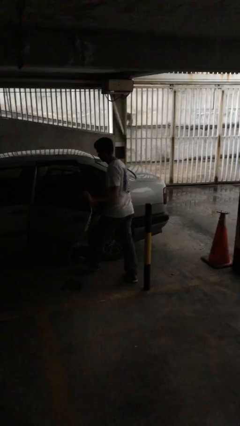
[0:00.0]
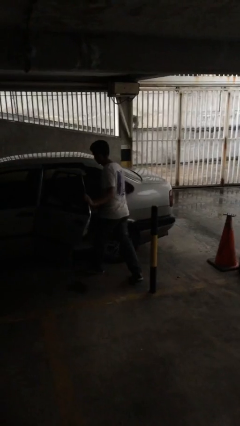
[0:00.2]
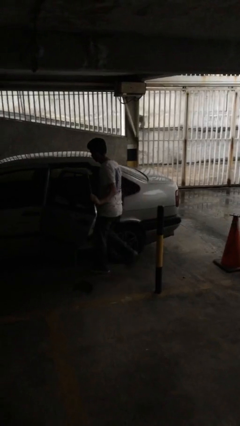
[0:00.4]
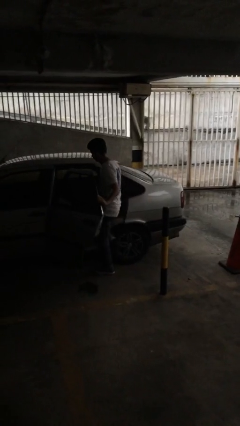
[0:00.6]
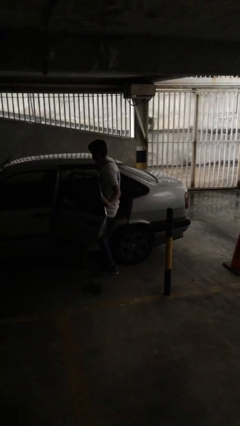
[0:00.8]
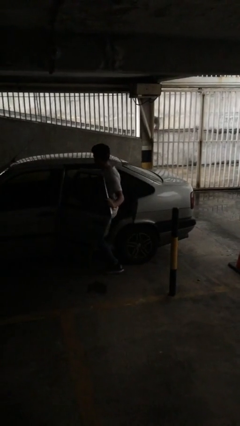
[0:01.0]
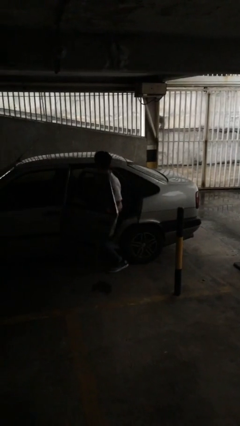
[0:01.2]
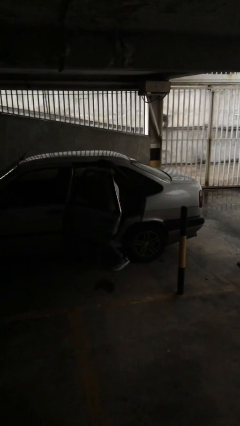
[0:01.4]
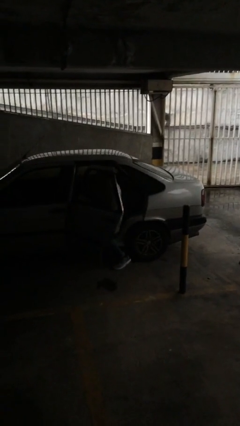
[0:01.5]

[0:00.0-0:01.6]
person enters car

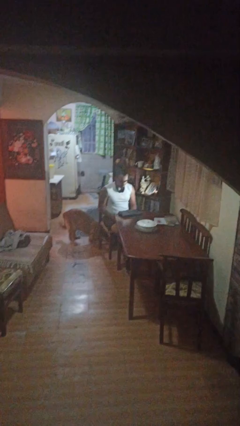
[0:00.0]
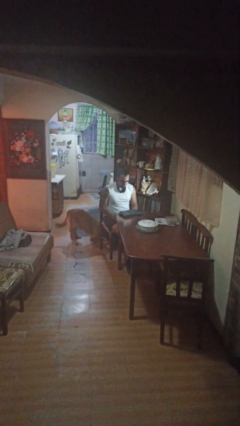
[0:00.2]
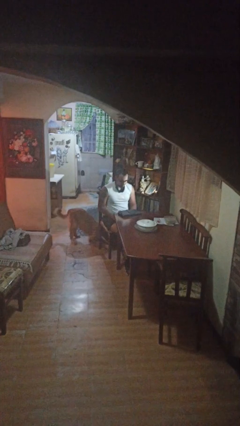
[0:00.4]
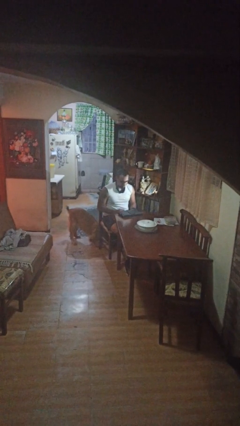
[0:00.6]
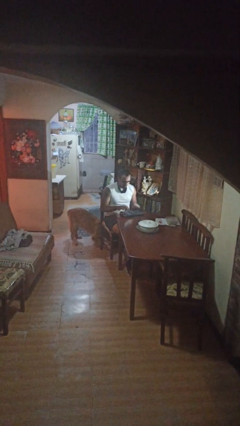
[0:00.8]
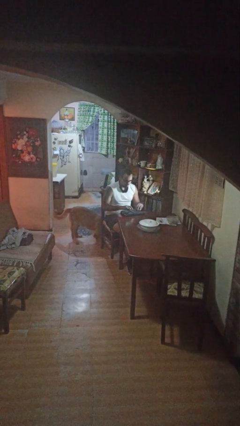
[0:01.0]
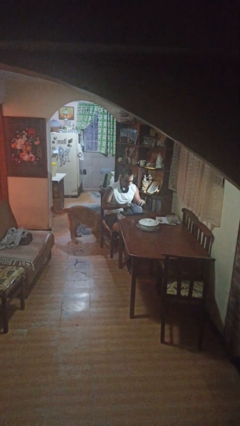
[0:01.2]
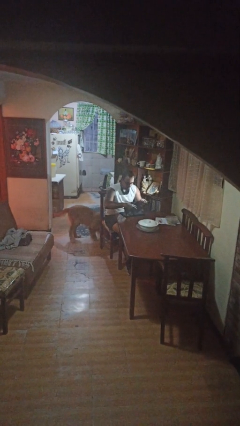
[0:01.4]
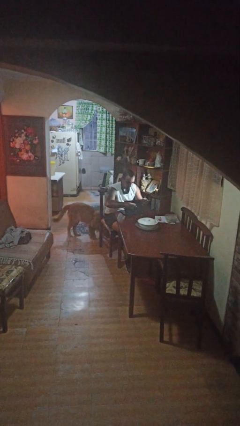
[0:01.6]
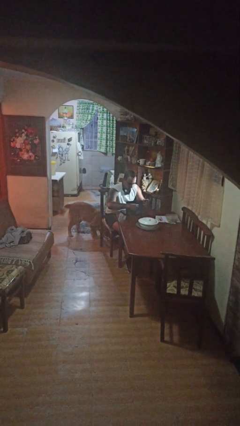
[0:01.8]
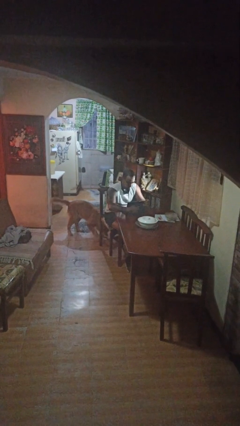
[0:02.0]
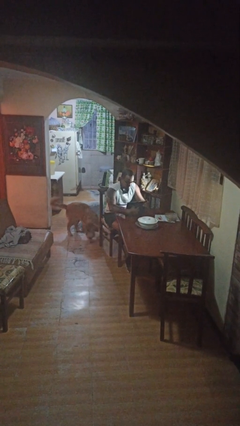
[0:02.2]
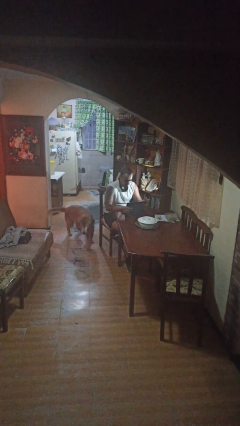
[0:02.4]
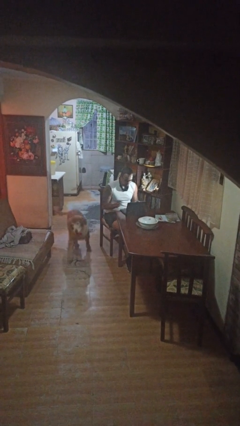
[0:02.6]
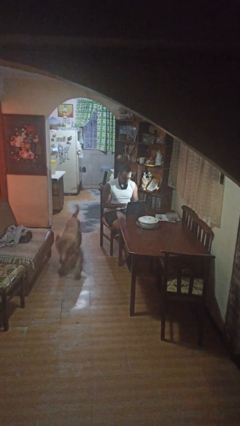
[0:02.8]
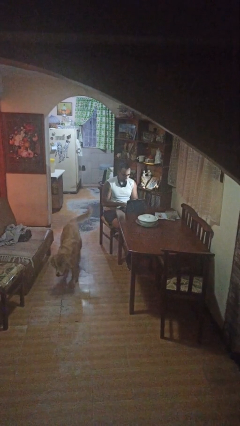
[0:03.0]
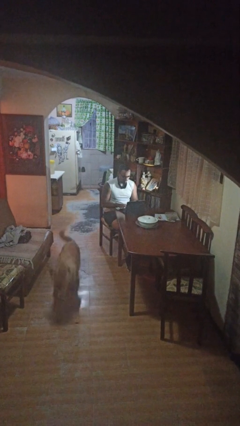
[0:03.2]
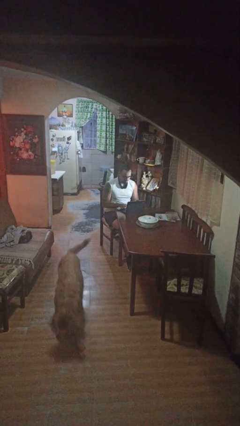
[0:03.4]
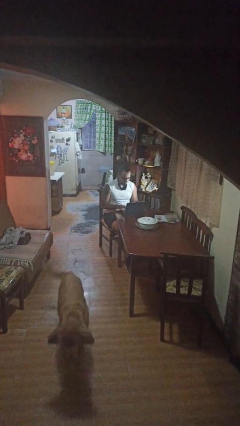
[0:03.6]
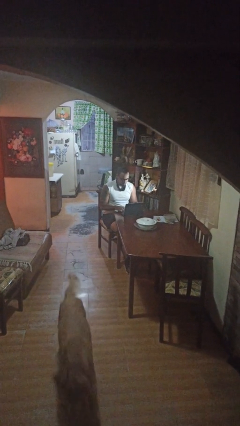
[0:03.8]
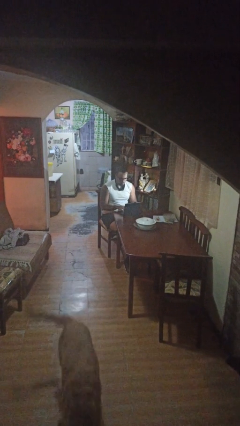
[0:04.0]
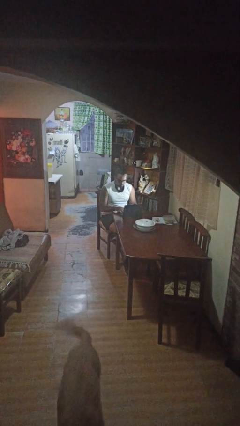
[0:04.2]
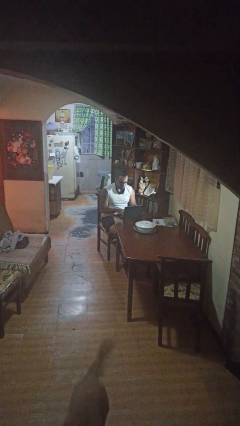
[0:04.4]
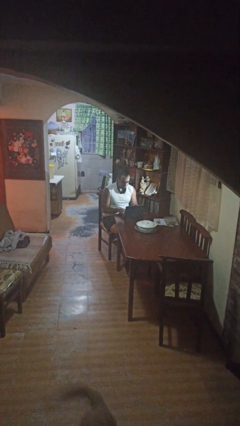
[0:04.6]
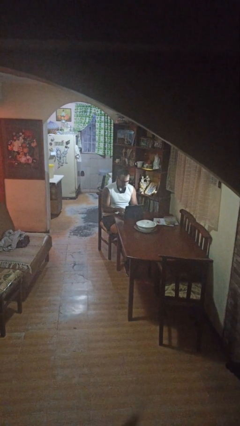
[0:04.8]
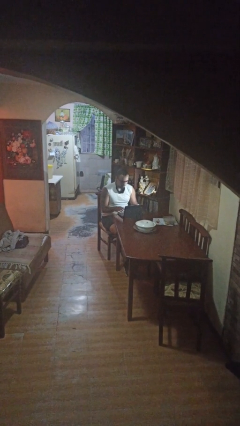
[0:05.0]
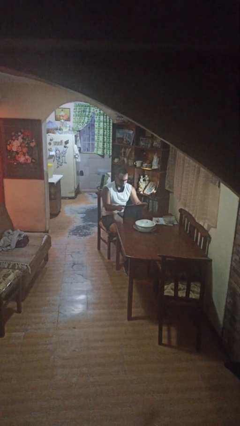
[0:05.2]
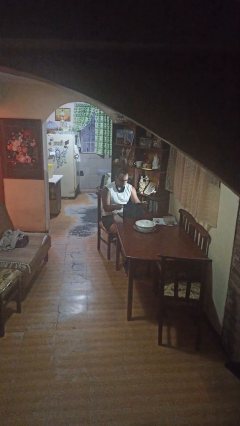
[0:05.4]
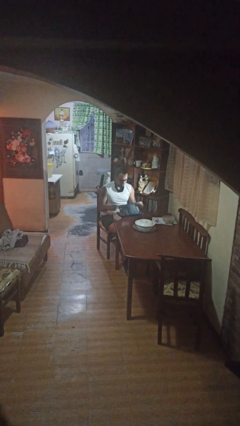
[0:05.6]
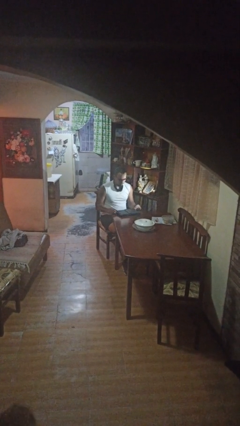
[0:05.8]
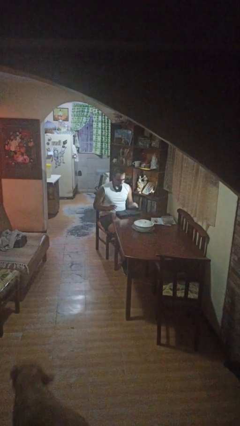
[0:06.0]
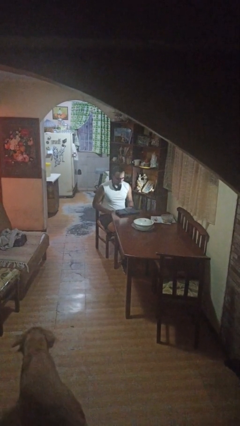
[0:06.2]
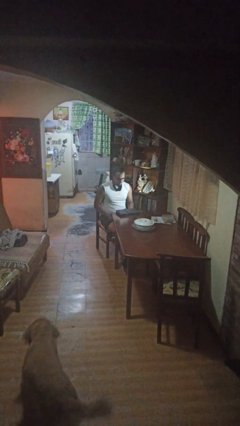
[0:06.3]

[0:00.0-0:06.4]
person interacts with laptop

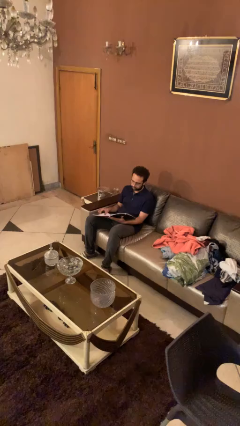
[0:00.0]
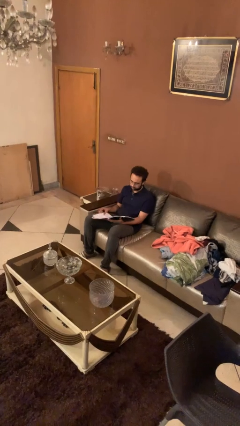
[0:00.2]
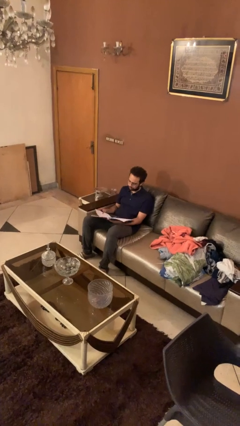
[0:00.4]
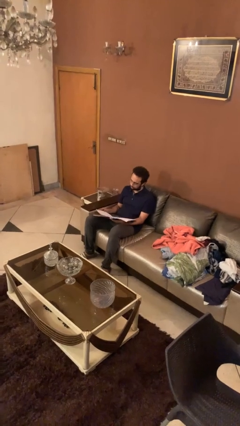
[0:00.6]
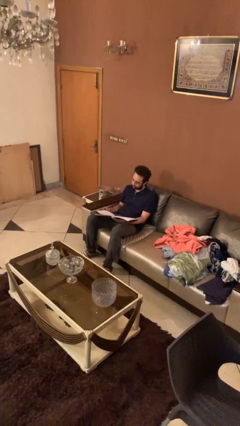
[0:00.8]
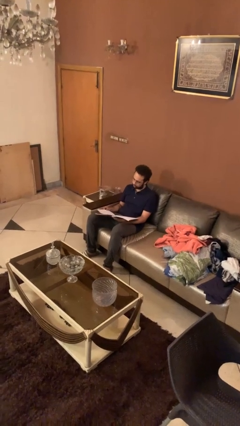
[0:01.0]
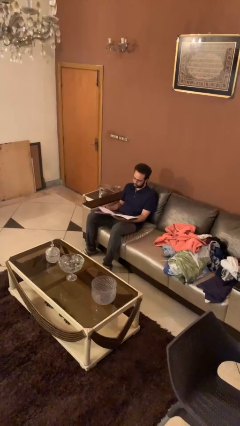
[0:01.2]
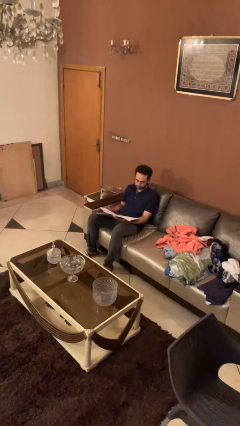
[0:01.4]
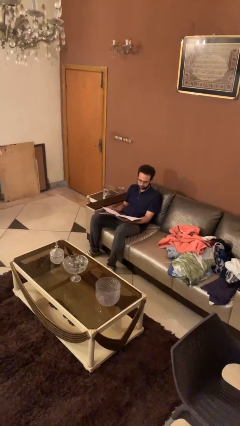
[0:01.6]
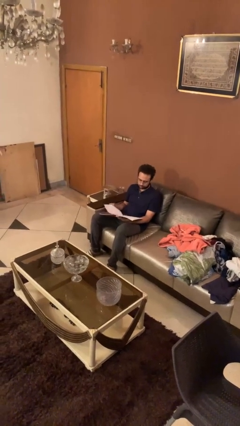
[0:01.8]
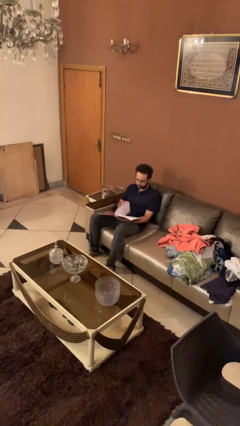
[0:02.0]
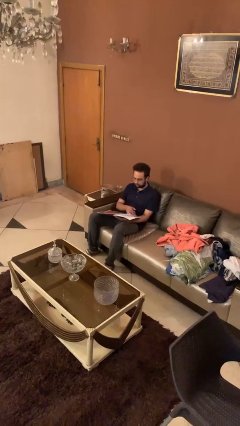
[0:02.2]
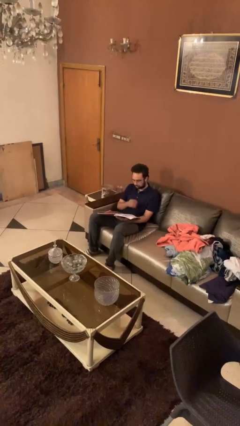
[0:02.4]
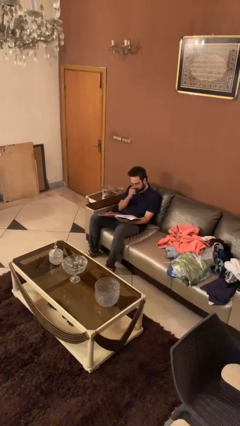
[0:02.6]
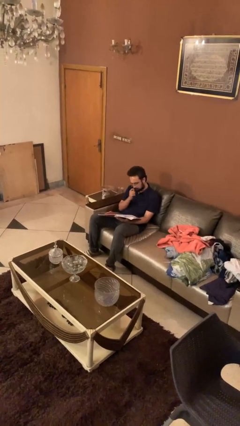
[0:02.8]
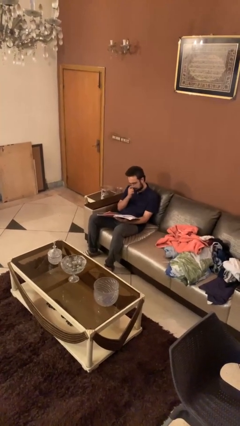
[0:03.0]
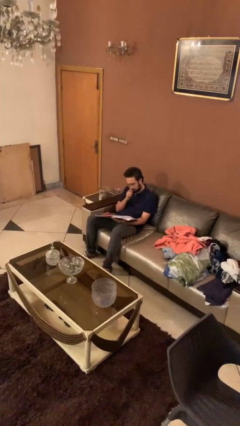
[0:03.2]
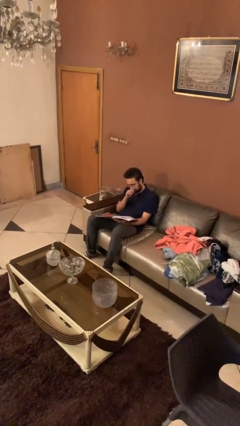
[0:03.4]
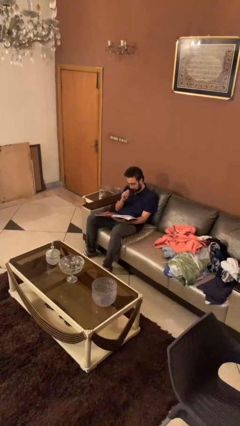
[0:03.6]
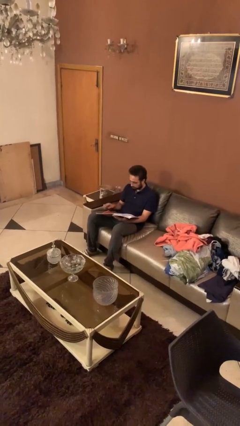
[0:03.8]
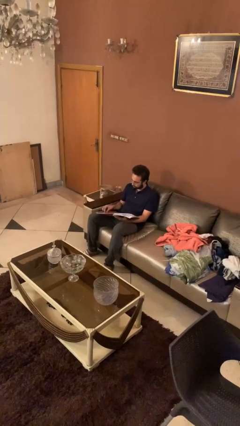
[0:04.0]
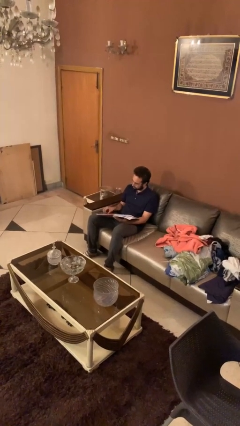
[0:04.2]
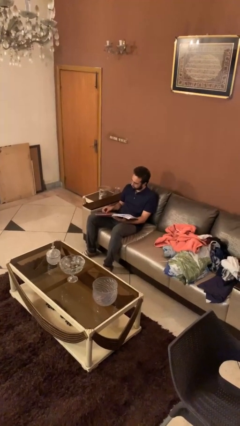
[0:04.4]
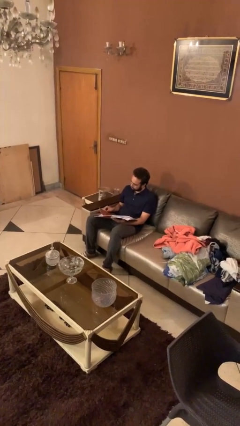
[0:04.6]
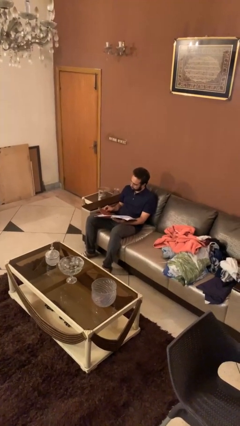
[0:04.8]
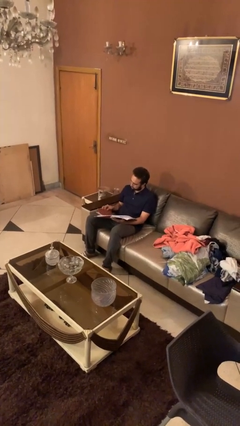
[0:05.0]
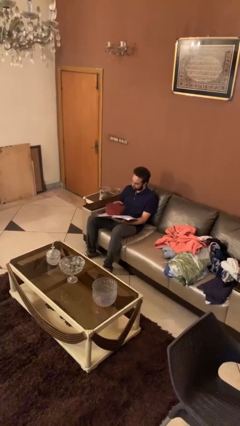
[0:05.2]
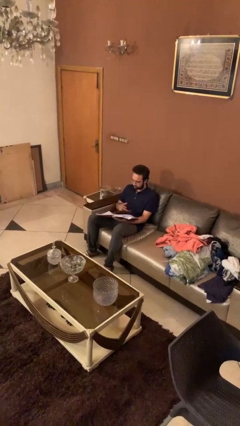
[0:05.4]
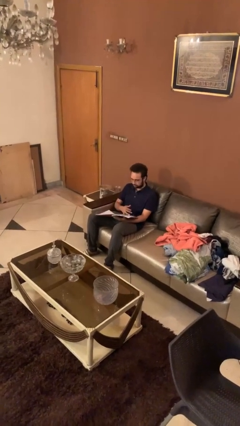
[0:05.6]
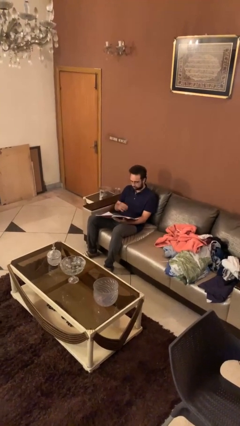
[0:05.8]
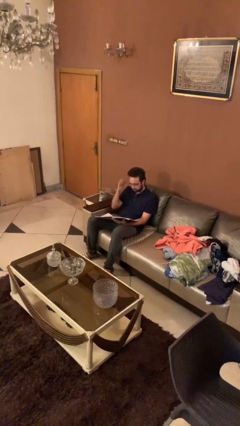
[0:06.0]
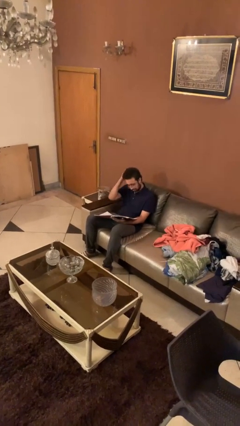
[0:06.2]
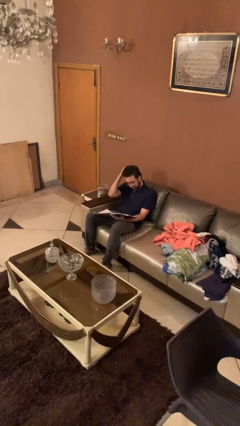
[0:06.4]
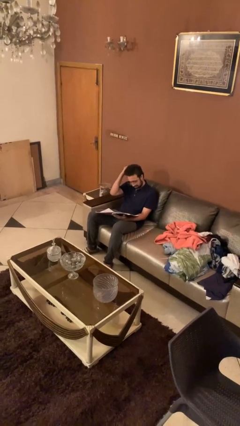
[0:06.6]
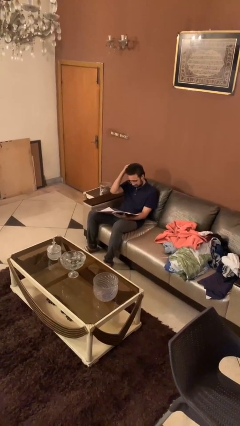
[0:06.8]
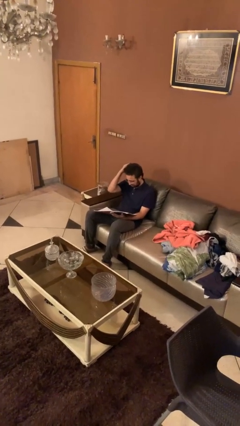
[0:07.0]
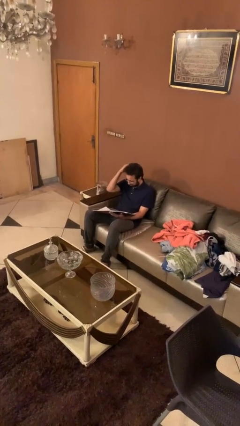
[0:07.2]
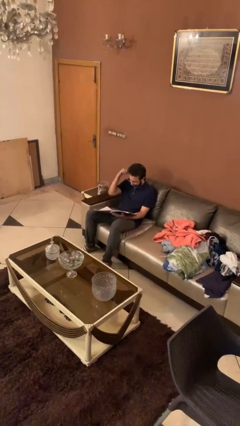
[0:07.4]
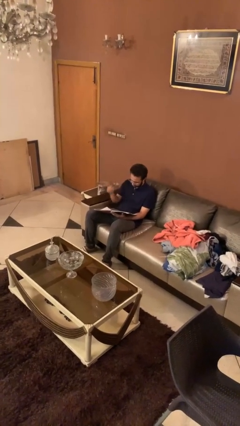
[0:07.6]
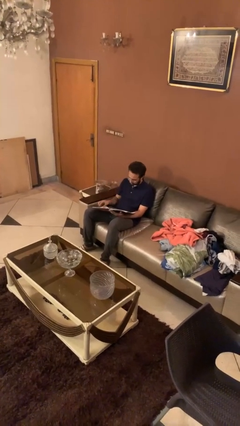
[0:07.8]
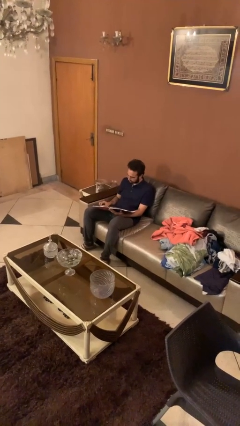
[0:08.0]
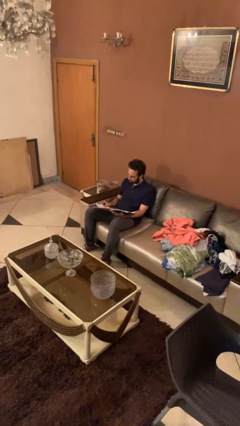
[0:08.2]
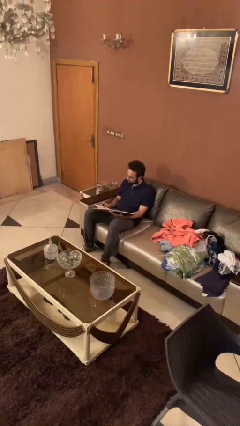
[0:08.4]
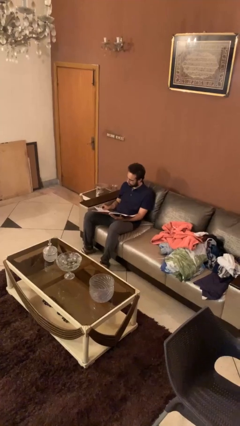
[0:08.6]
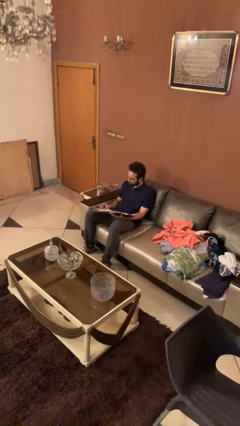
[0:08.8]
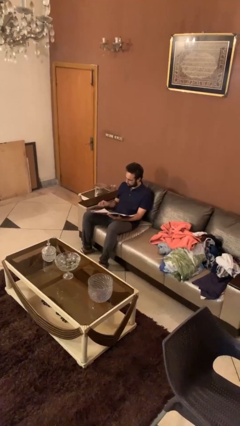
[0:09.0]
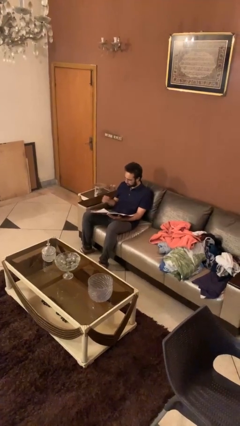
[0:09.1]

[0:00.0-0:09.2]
person reads document

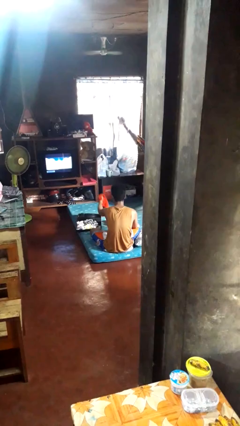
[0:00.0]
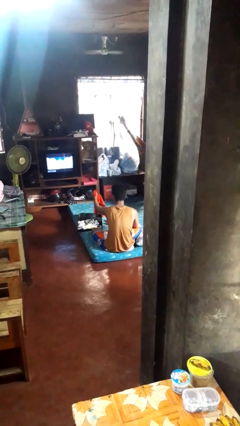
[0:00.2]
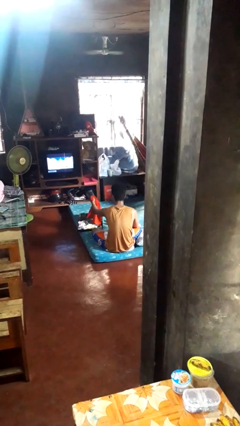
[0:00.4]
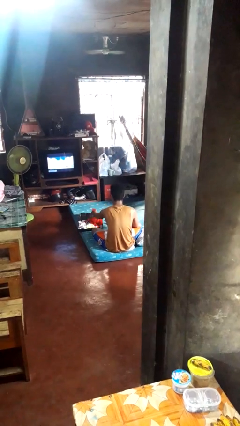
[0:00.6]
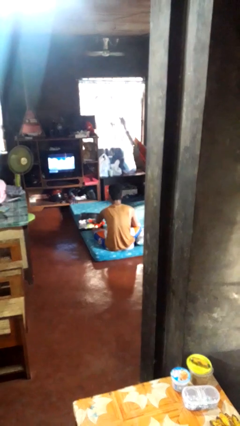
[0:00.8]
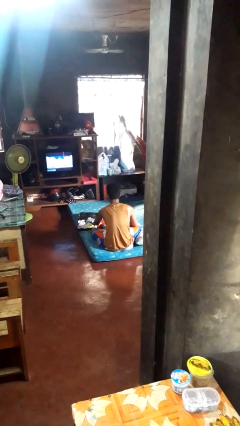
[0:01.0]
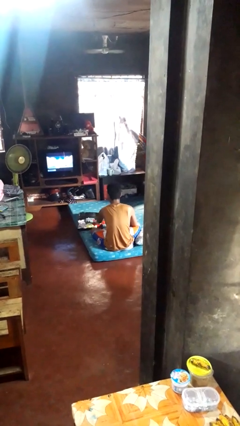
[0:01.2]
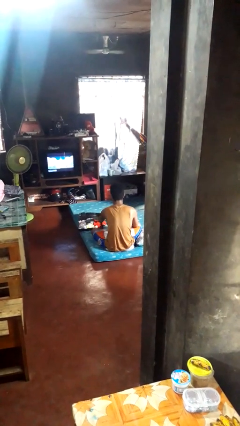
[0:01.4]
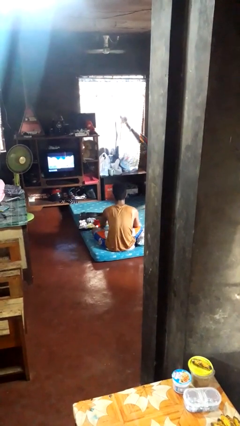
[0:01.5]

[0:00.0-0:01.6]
person loads clothes into suitcase
